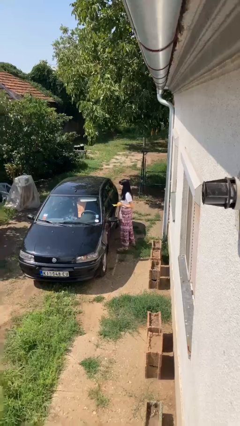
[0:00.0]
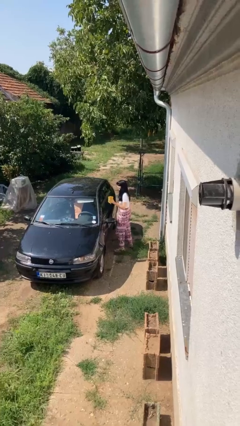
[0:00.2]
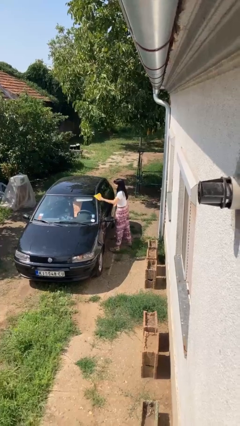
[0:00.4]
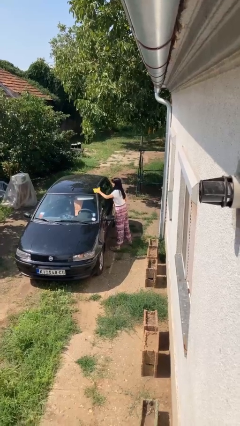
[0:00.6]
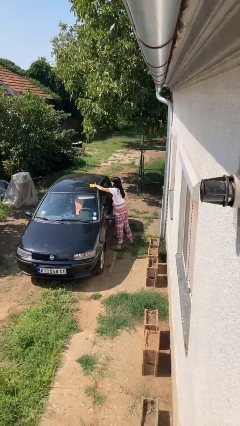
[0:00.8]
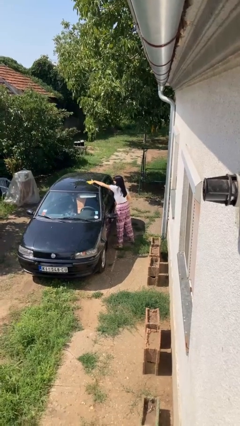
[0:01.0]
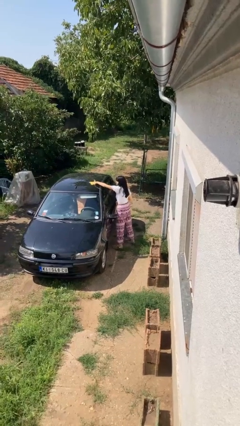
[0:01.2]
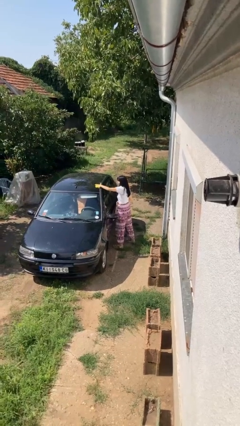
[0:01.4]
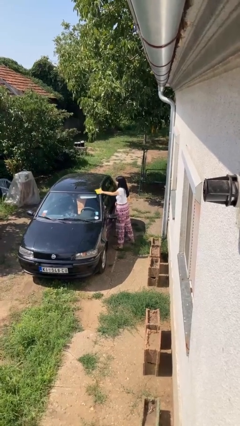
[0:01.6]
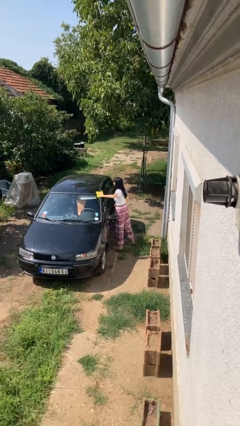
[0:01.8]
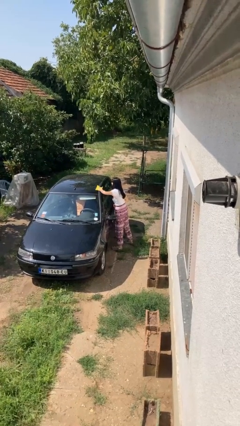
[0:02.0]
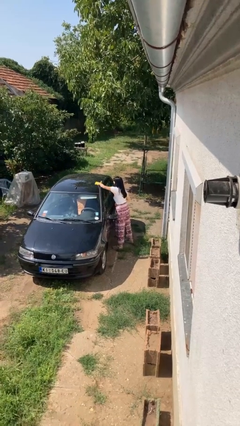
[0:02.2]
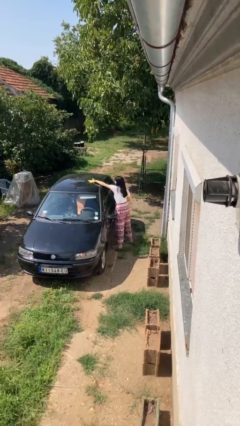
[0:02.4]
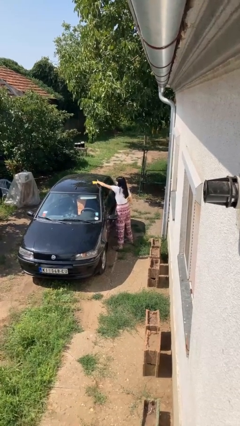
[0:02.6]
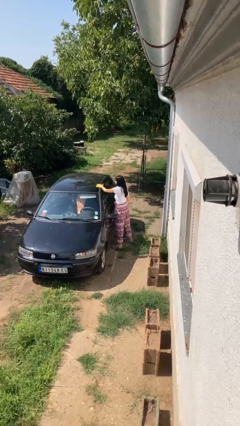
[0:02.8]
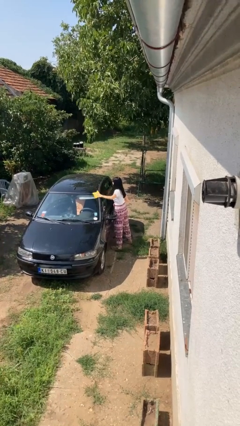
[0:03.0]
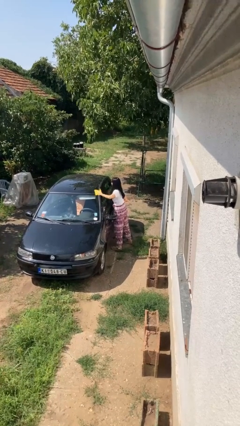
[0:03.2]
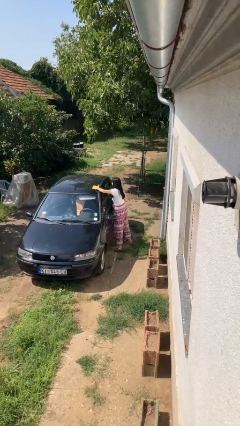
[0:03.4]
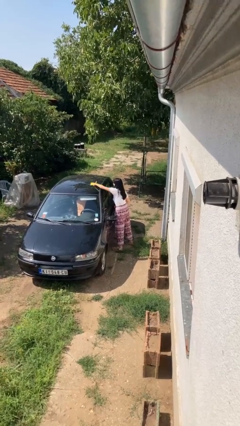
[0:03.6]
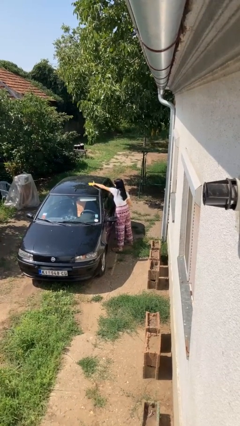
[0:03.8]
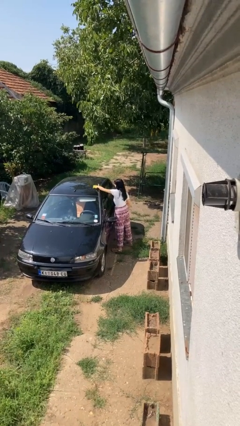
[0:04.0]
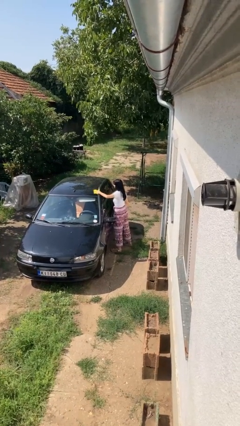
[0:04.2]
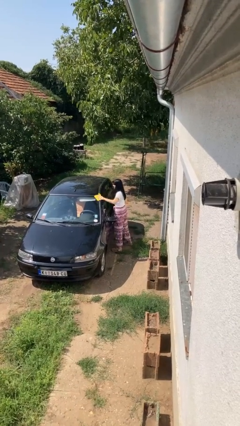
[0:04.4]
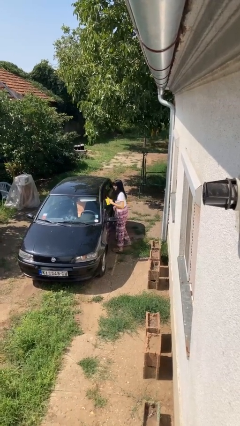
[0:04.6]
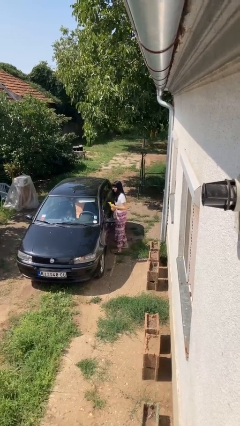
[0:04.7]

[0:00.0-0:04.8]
person polishes car with rag

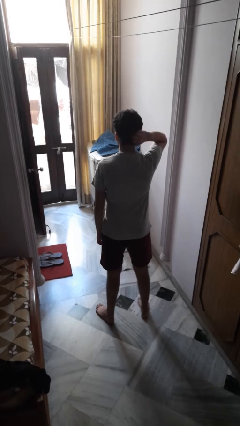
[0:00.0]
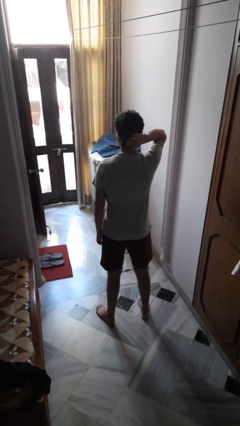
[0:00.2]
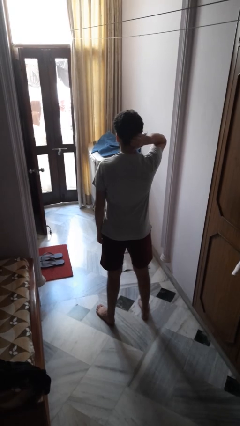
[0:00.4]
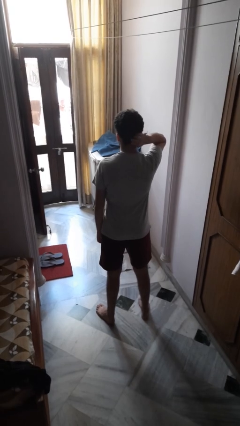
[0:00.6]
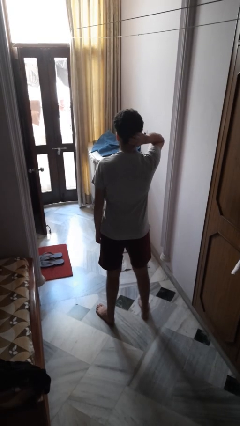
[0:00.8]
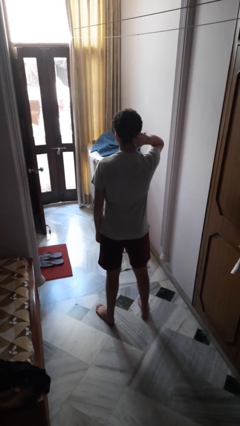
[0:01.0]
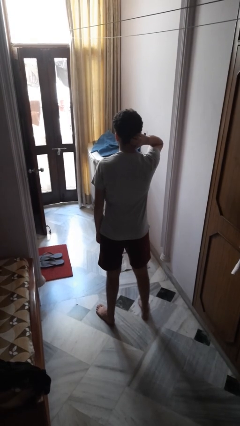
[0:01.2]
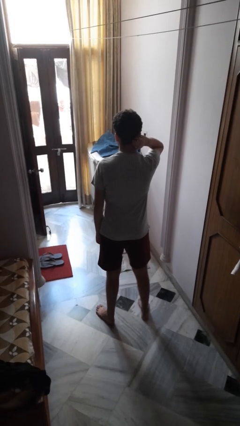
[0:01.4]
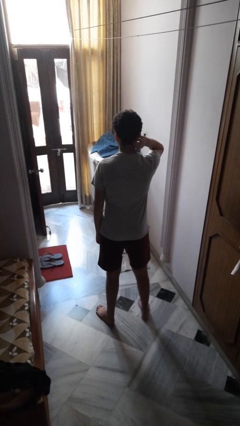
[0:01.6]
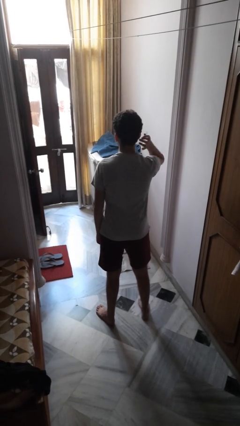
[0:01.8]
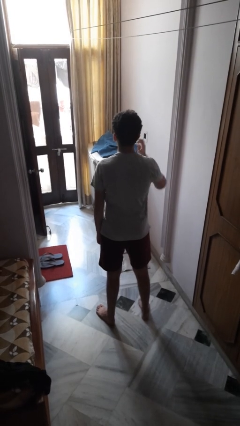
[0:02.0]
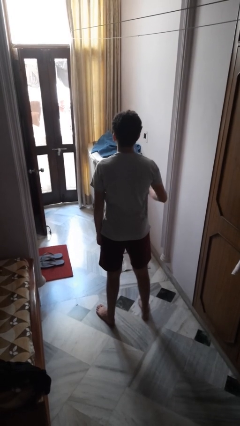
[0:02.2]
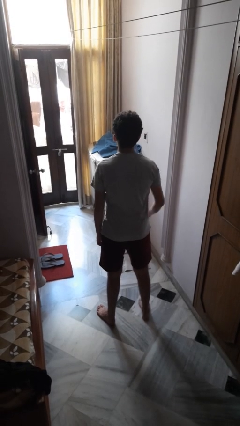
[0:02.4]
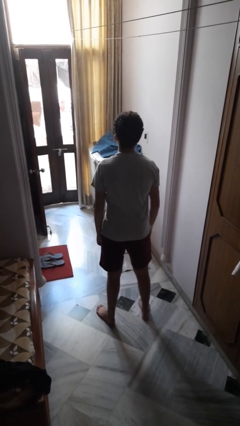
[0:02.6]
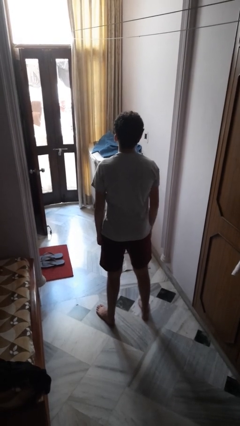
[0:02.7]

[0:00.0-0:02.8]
person scratches face

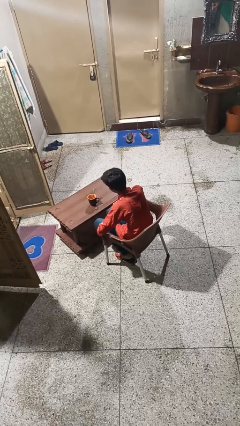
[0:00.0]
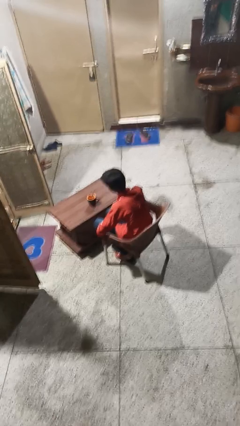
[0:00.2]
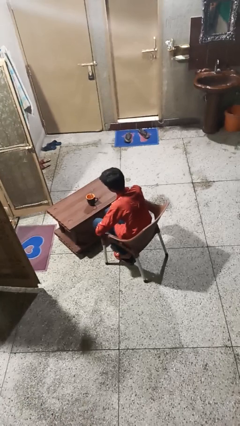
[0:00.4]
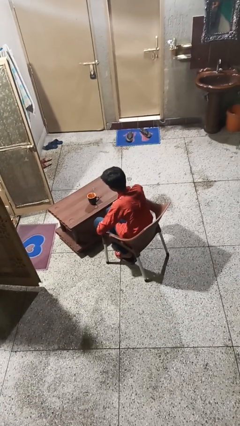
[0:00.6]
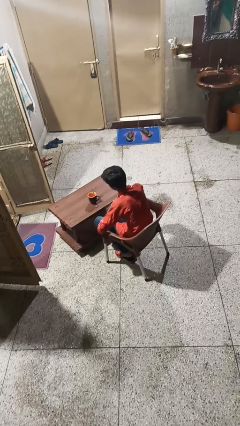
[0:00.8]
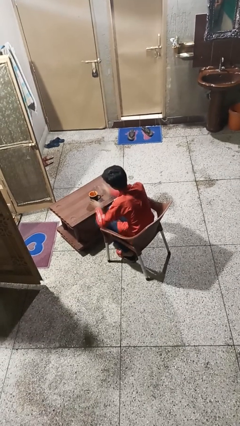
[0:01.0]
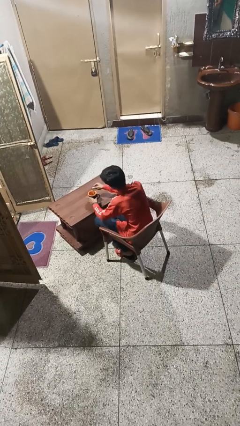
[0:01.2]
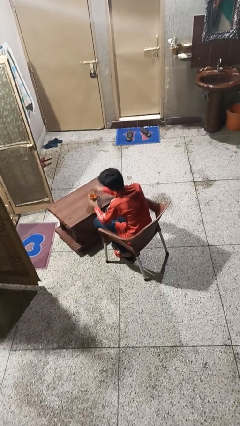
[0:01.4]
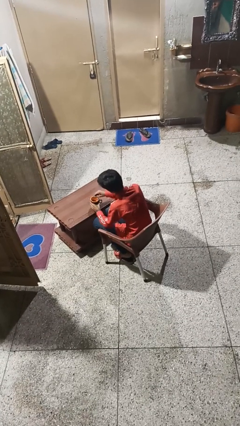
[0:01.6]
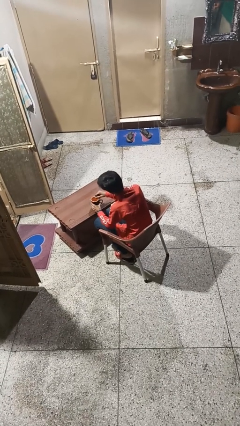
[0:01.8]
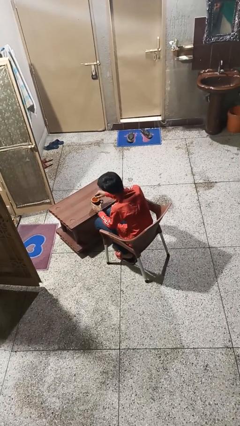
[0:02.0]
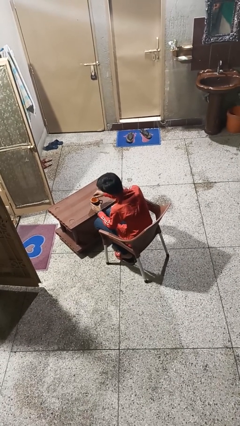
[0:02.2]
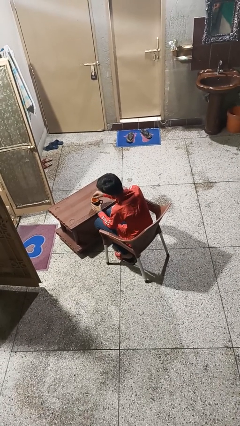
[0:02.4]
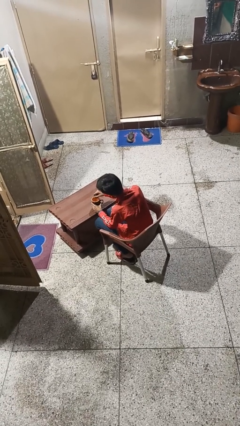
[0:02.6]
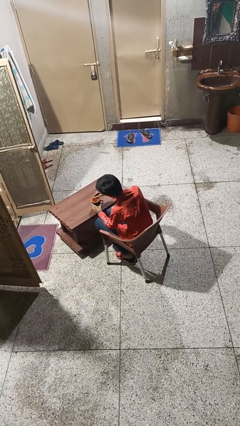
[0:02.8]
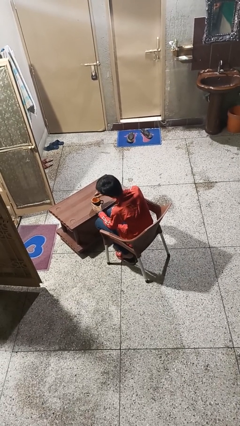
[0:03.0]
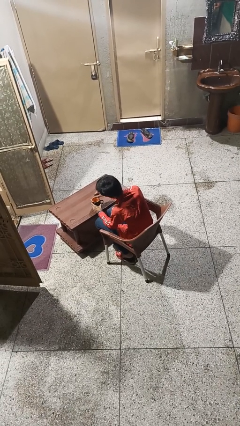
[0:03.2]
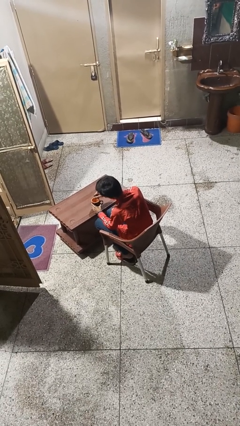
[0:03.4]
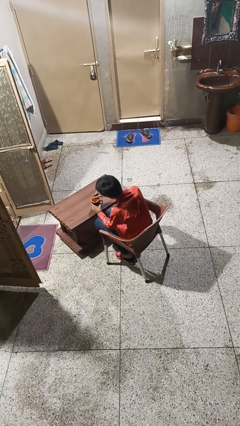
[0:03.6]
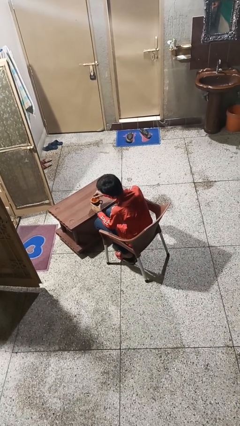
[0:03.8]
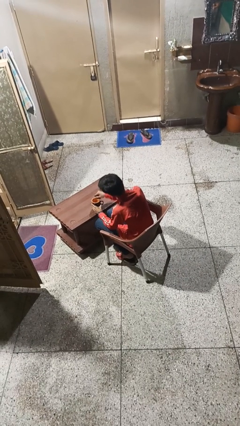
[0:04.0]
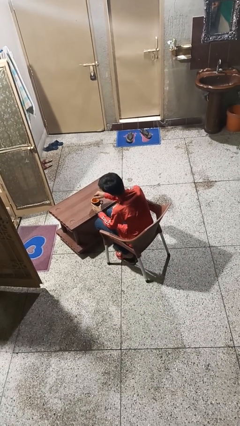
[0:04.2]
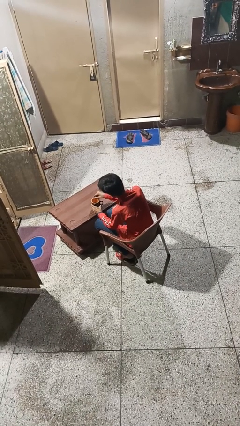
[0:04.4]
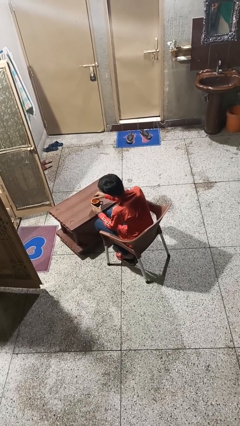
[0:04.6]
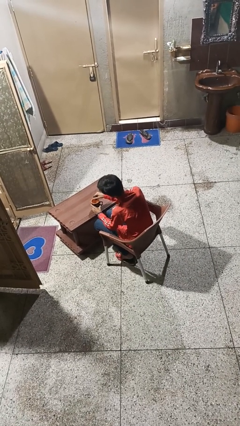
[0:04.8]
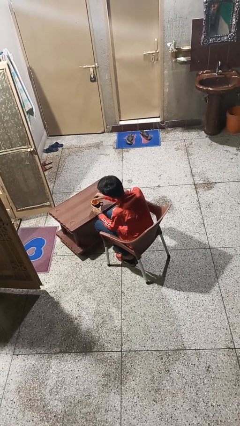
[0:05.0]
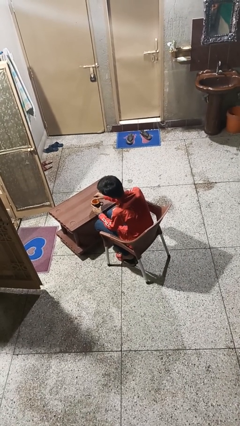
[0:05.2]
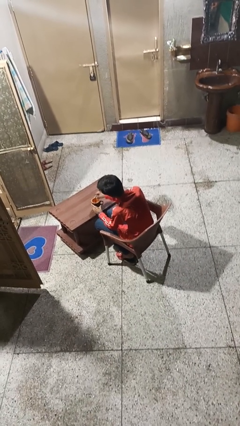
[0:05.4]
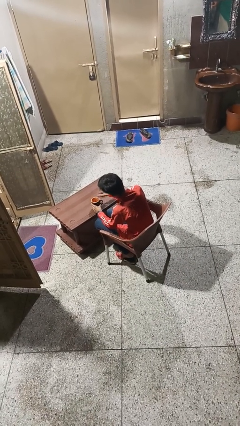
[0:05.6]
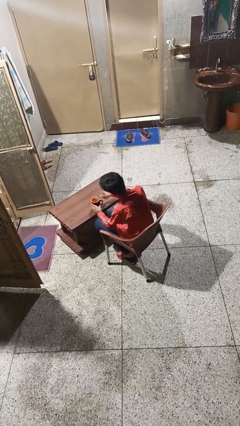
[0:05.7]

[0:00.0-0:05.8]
person stirs mug

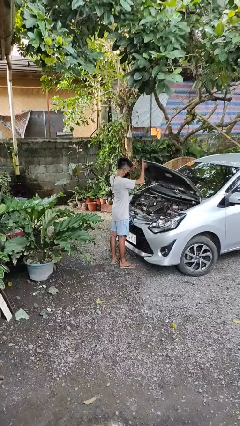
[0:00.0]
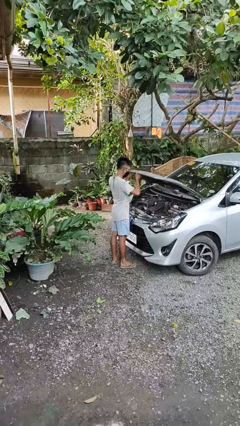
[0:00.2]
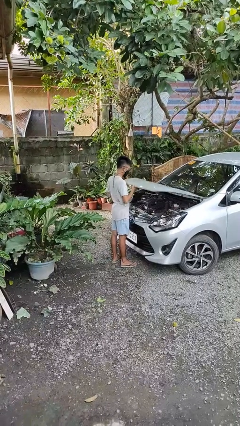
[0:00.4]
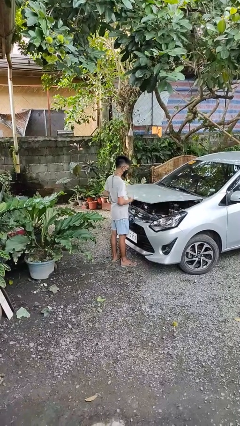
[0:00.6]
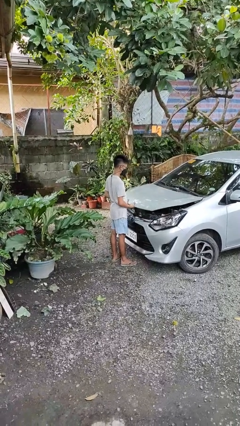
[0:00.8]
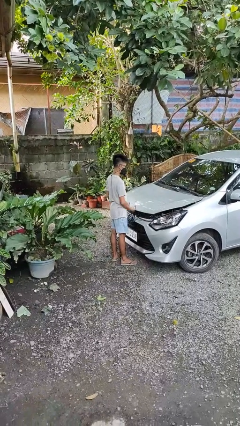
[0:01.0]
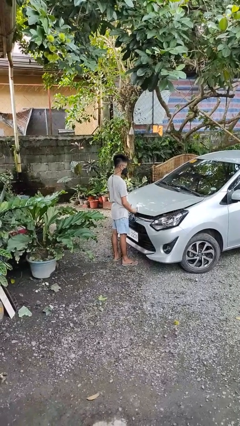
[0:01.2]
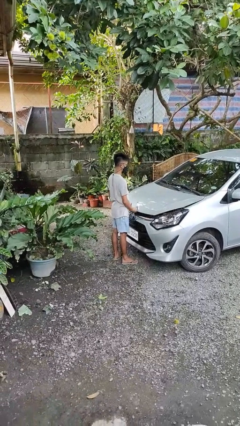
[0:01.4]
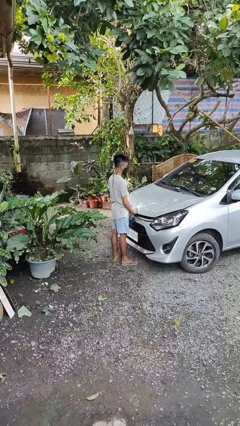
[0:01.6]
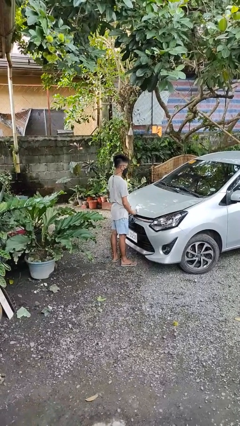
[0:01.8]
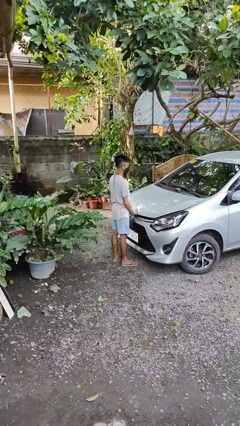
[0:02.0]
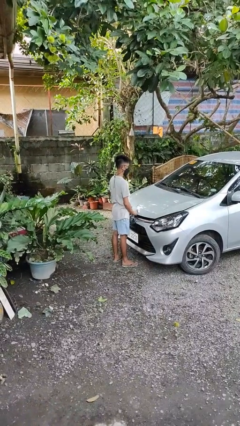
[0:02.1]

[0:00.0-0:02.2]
person closes car hood

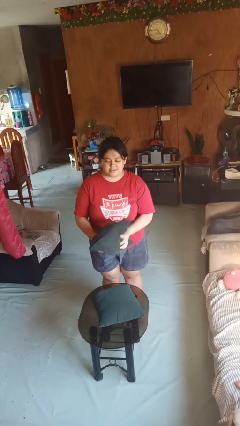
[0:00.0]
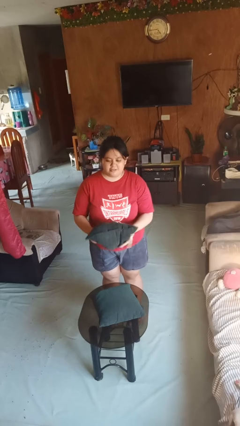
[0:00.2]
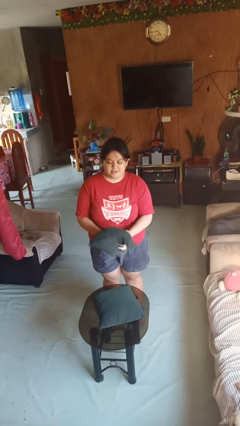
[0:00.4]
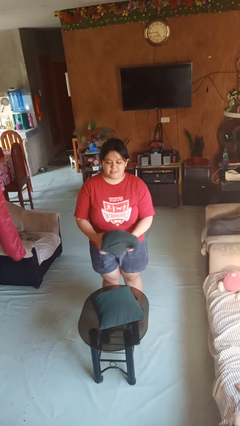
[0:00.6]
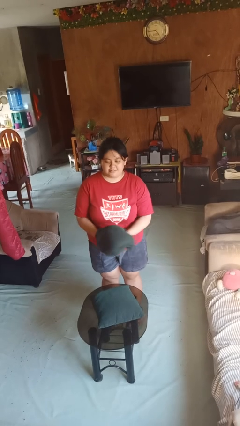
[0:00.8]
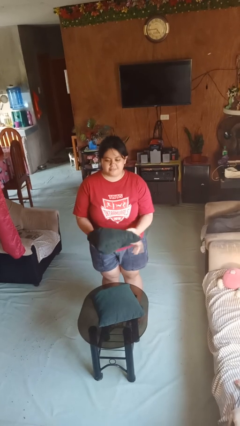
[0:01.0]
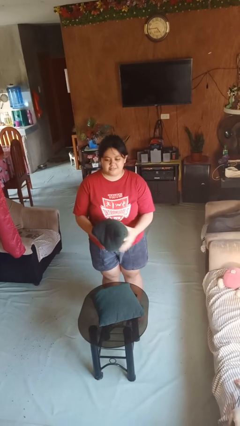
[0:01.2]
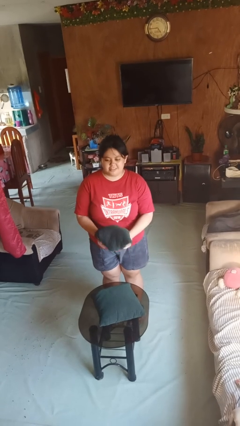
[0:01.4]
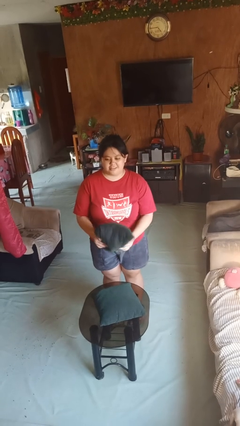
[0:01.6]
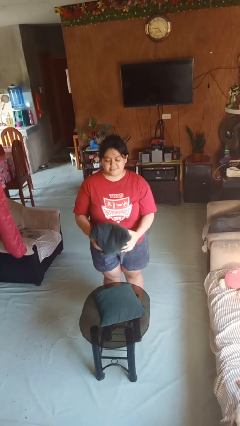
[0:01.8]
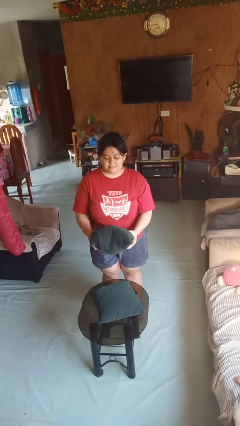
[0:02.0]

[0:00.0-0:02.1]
person squeezes object
